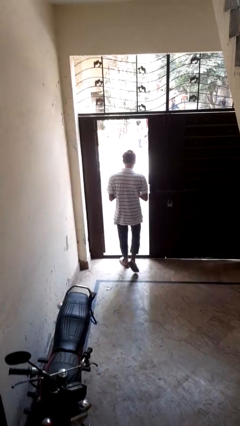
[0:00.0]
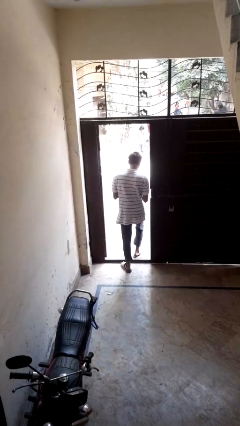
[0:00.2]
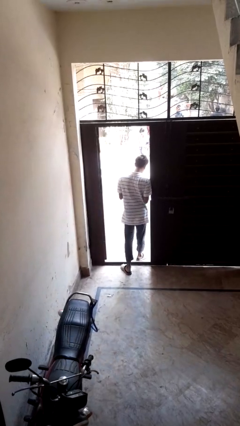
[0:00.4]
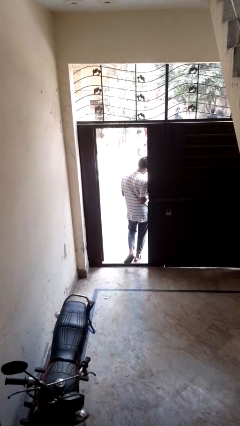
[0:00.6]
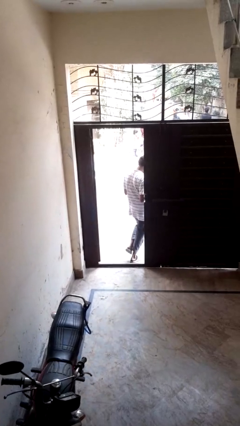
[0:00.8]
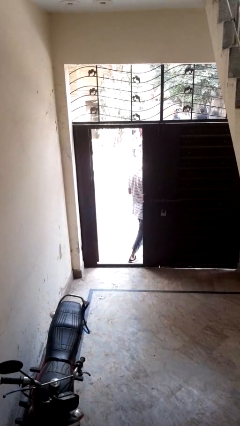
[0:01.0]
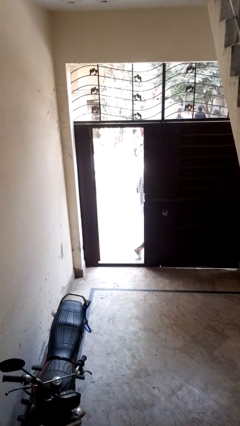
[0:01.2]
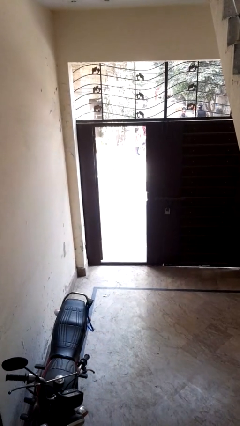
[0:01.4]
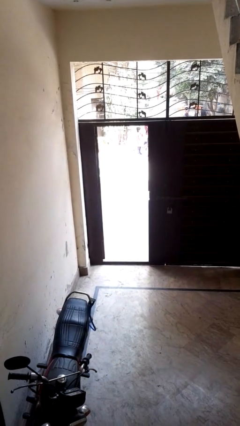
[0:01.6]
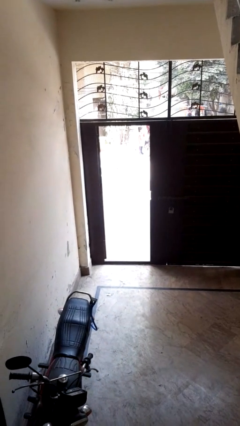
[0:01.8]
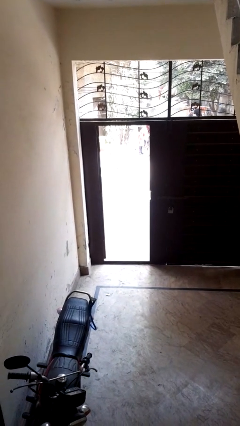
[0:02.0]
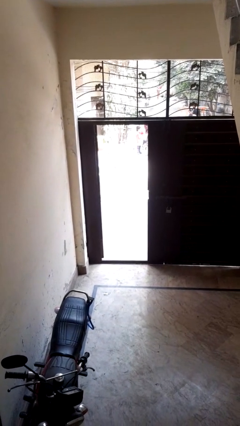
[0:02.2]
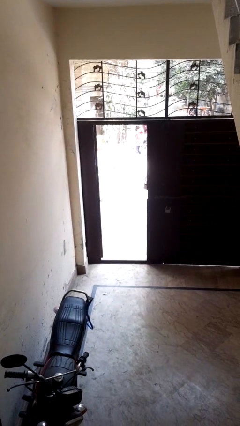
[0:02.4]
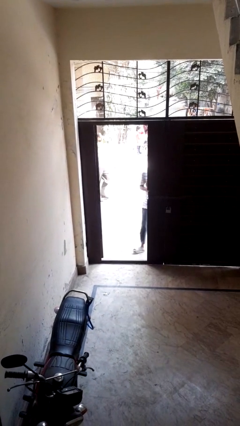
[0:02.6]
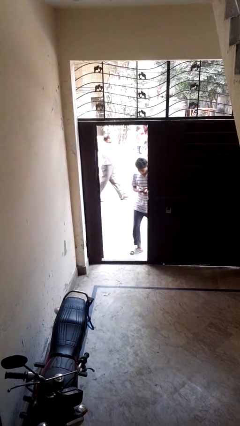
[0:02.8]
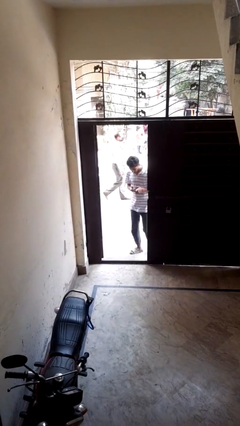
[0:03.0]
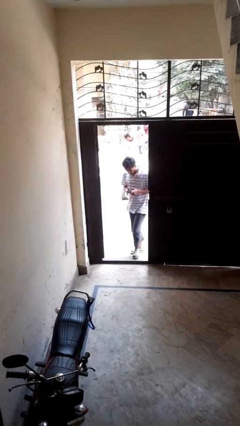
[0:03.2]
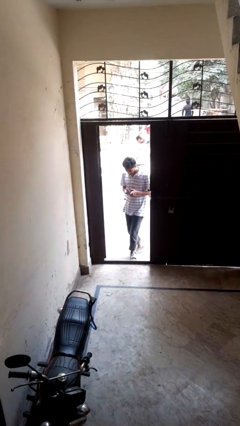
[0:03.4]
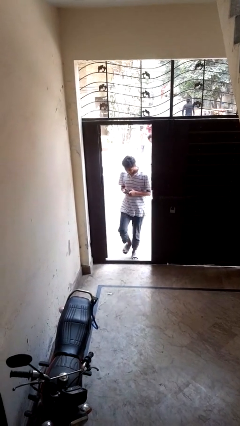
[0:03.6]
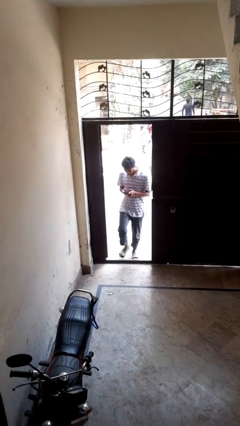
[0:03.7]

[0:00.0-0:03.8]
person exits scene through structure

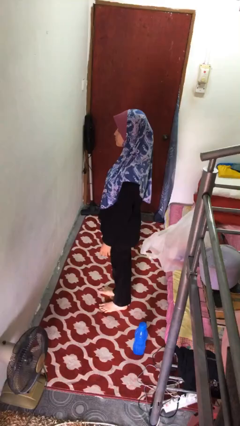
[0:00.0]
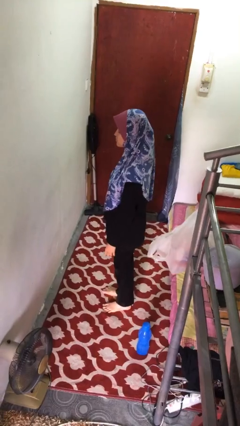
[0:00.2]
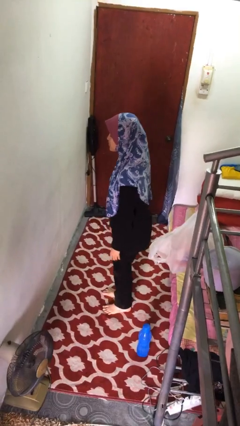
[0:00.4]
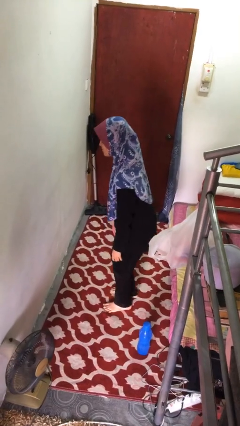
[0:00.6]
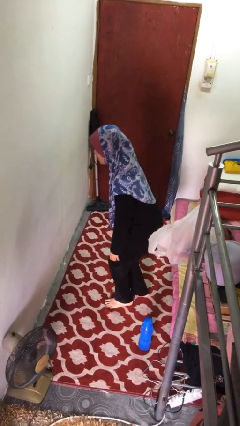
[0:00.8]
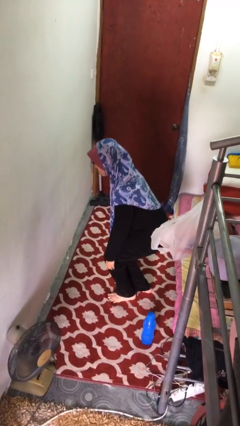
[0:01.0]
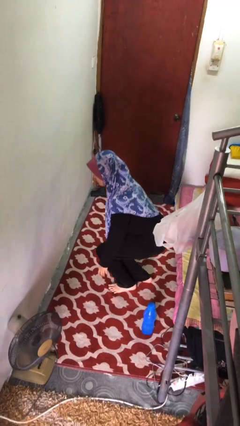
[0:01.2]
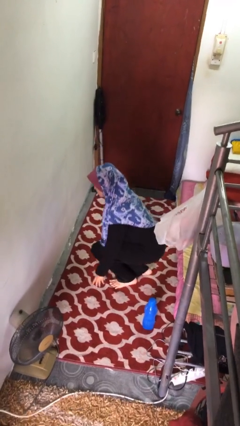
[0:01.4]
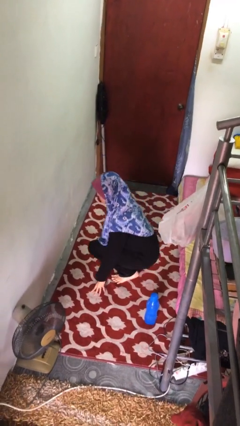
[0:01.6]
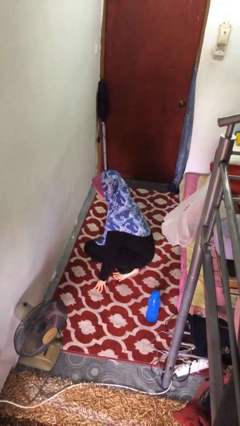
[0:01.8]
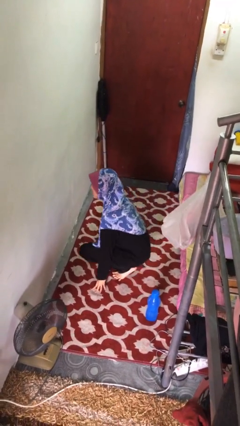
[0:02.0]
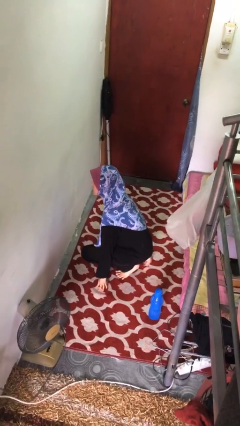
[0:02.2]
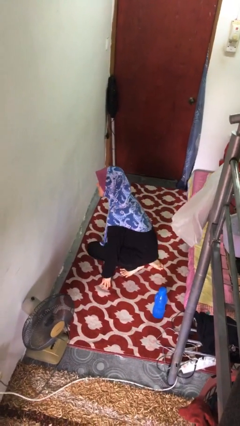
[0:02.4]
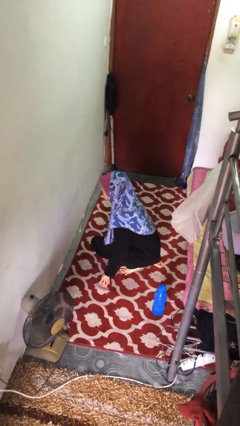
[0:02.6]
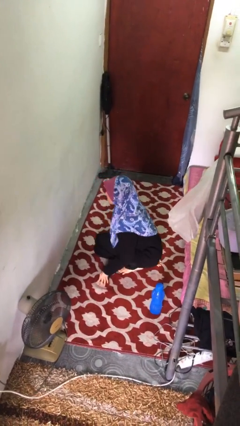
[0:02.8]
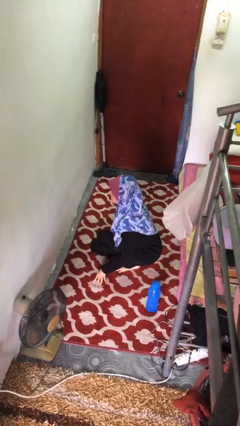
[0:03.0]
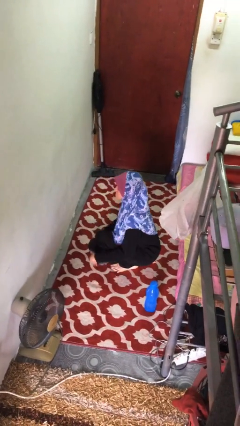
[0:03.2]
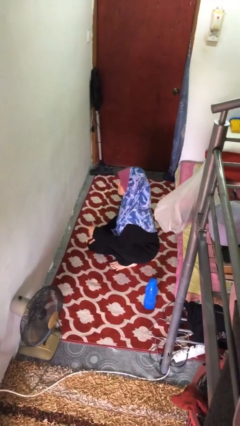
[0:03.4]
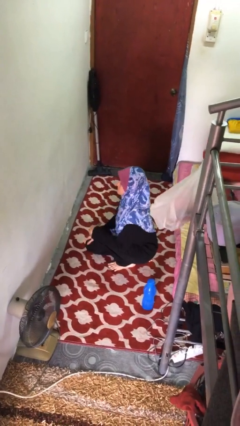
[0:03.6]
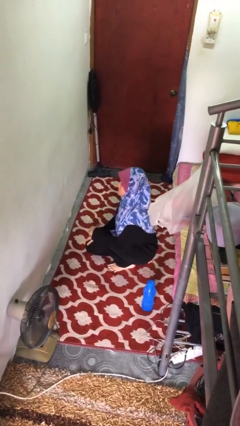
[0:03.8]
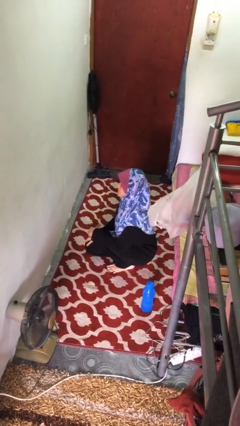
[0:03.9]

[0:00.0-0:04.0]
person kneels

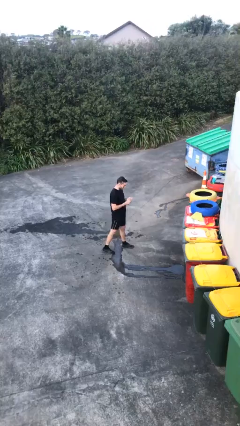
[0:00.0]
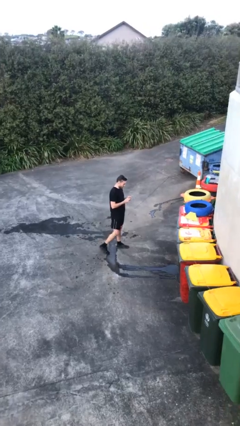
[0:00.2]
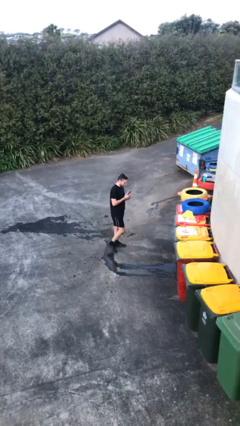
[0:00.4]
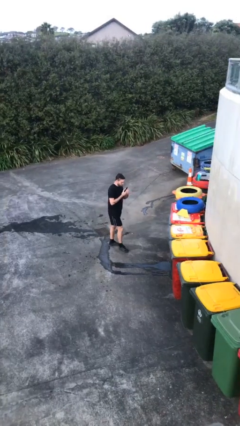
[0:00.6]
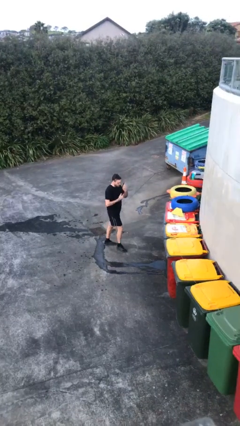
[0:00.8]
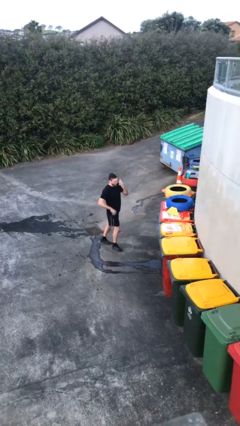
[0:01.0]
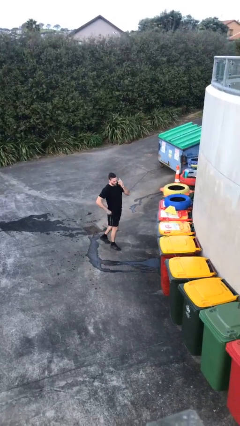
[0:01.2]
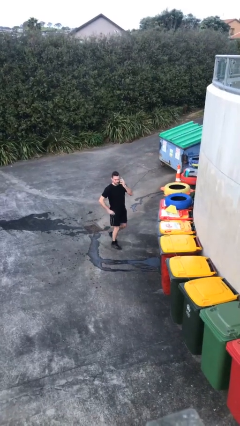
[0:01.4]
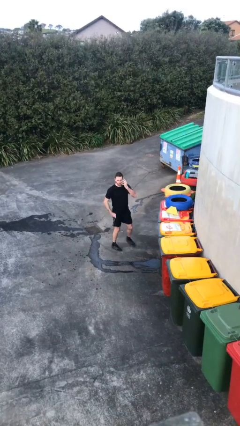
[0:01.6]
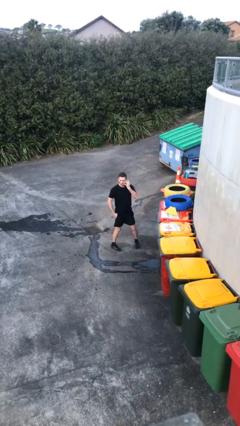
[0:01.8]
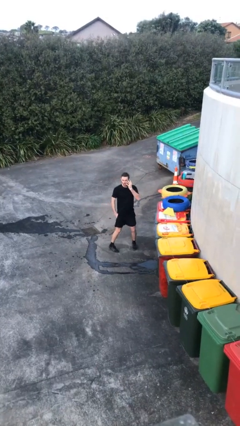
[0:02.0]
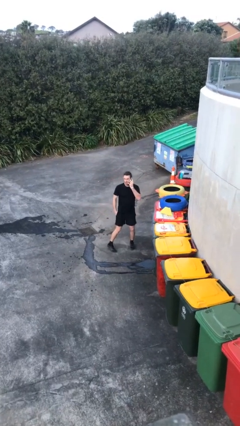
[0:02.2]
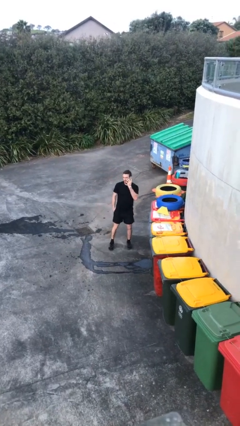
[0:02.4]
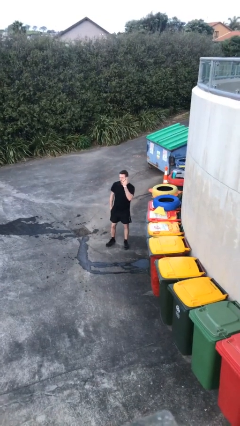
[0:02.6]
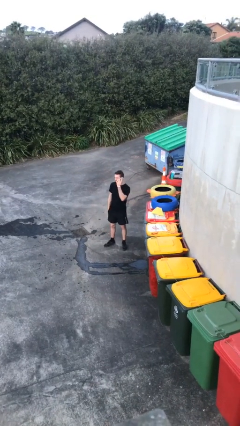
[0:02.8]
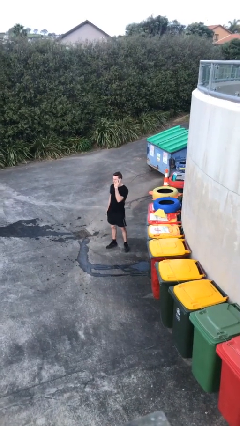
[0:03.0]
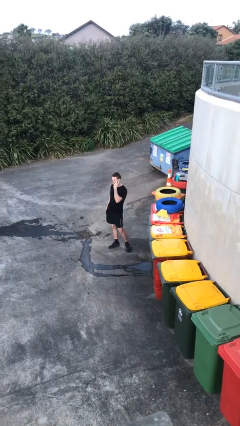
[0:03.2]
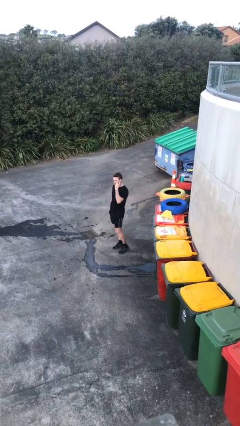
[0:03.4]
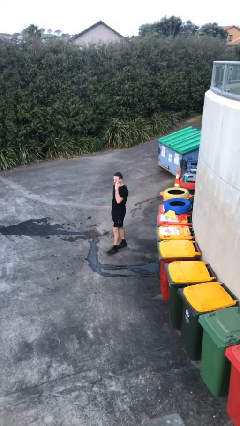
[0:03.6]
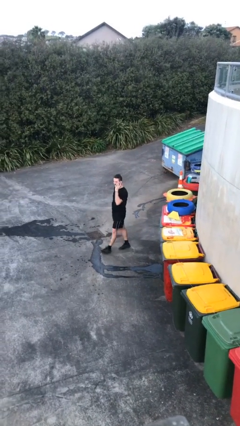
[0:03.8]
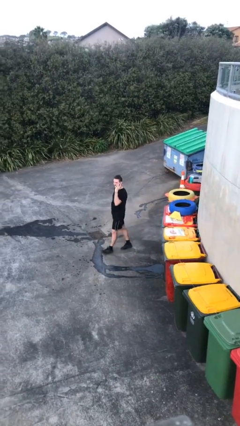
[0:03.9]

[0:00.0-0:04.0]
person talks on phone

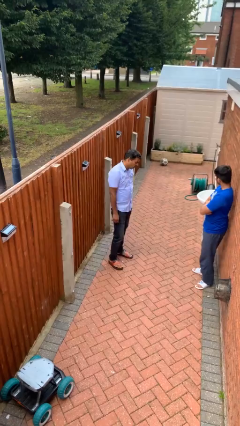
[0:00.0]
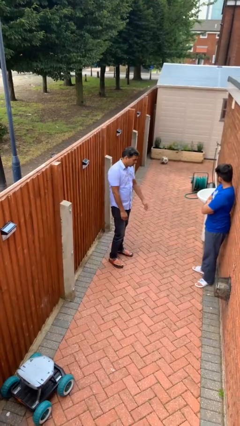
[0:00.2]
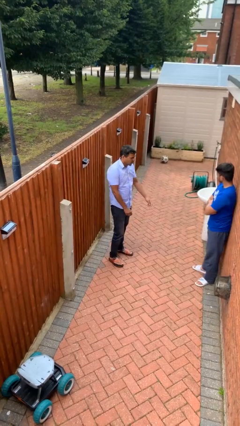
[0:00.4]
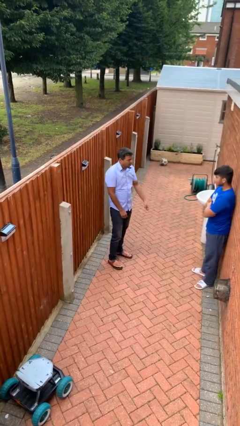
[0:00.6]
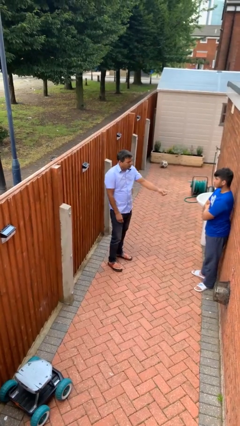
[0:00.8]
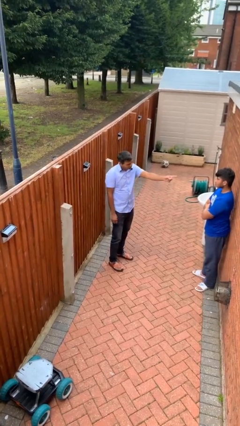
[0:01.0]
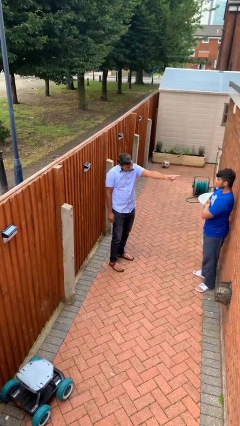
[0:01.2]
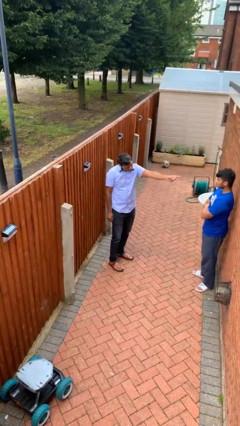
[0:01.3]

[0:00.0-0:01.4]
person points at person

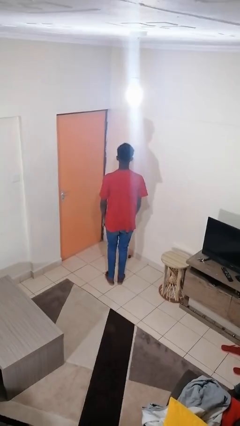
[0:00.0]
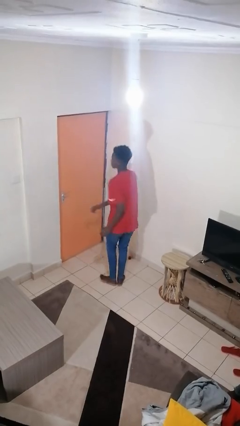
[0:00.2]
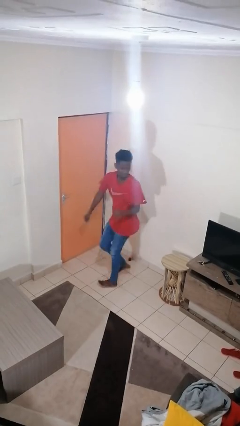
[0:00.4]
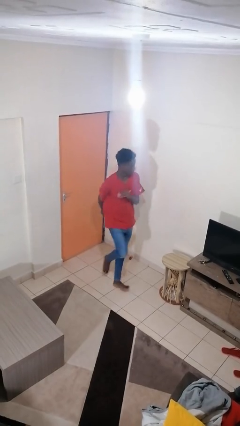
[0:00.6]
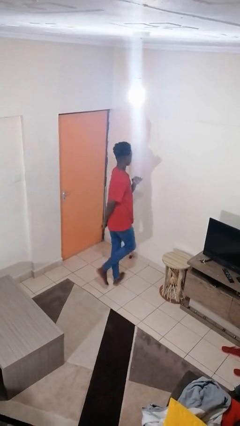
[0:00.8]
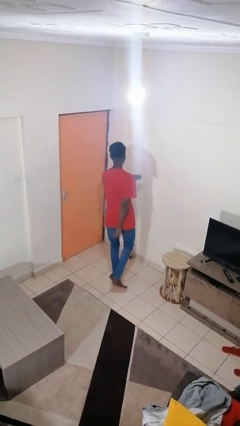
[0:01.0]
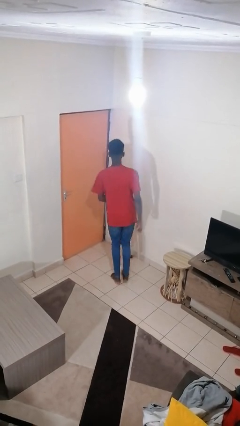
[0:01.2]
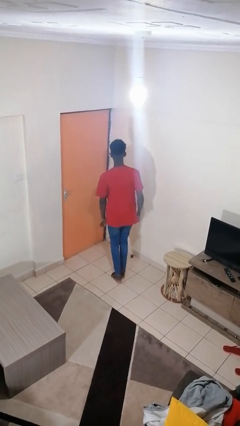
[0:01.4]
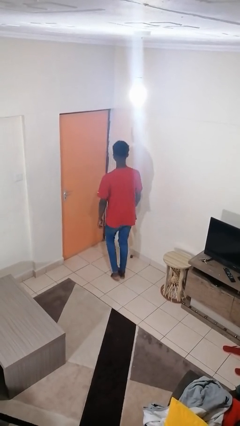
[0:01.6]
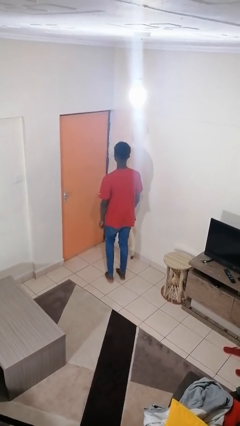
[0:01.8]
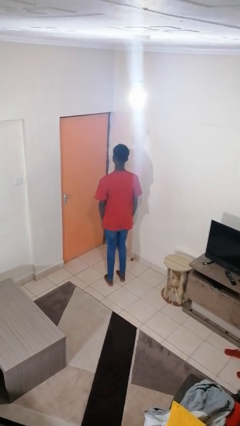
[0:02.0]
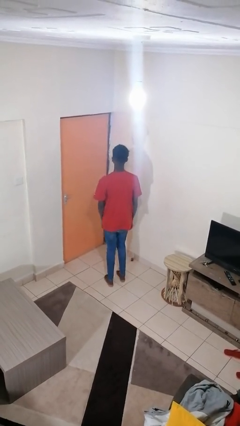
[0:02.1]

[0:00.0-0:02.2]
person twirls

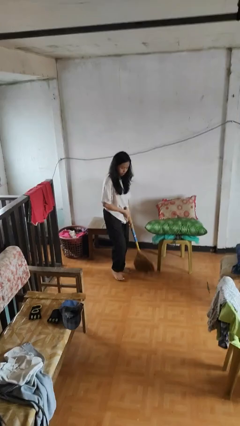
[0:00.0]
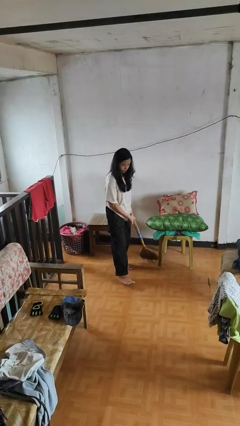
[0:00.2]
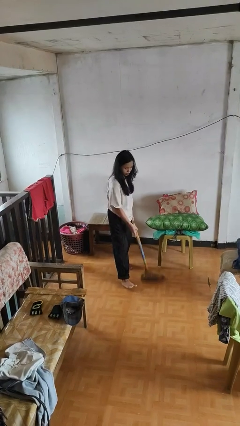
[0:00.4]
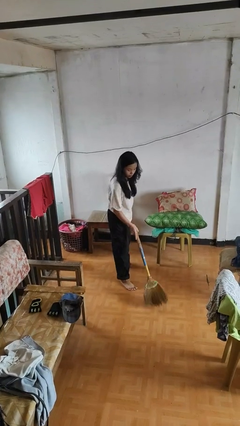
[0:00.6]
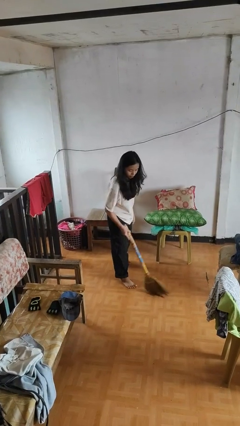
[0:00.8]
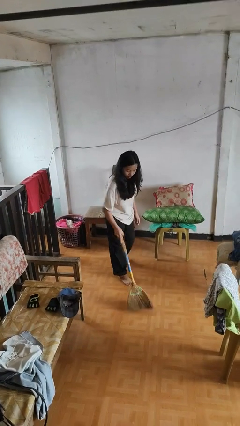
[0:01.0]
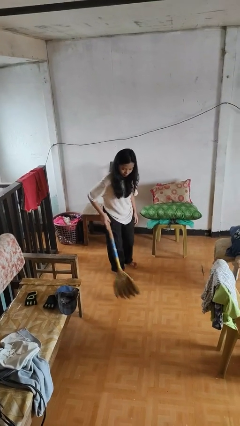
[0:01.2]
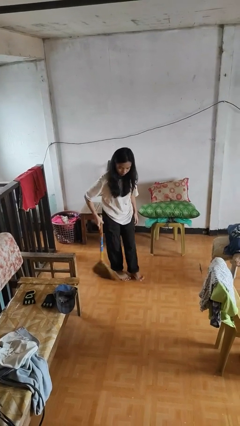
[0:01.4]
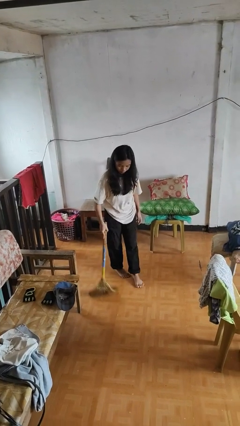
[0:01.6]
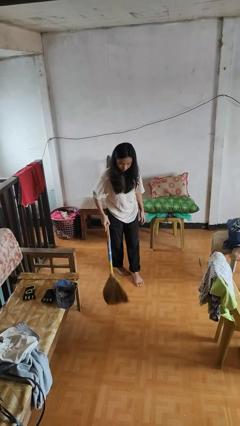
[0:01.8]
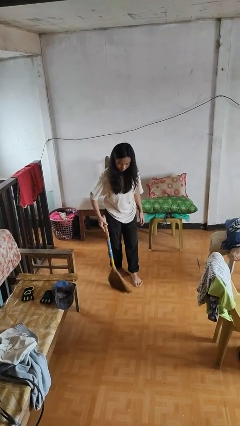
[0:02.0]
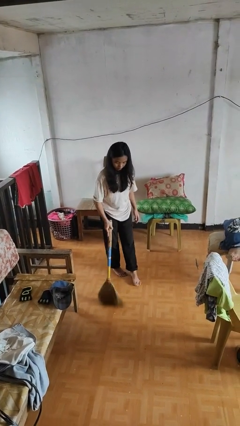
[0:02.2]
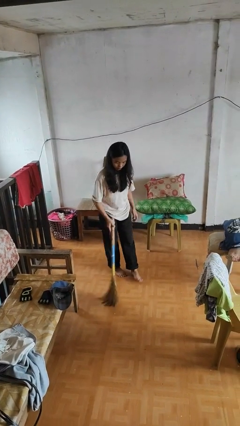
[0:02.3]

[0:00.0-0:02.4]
person sweeps floor
